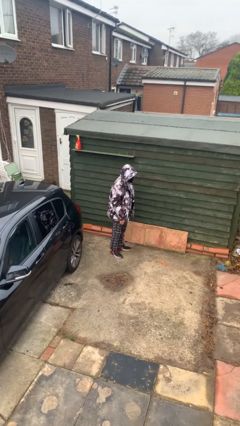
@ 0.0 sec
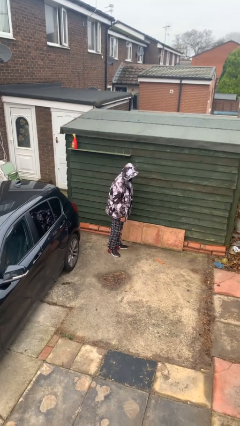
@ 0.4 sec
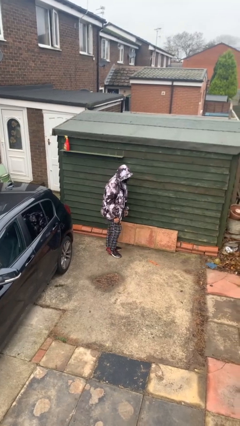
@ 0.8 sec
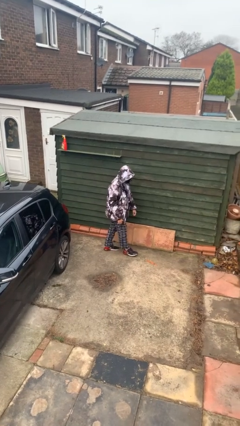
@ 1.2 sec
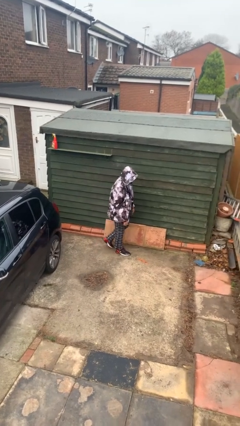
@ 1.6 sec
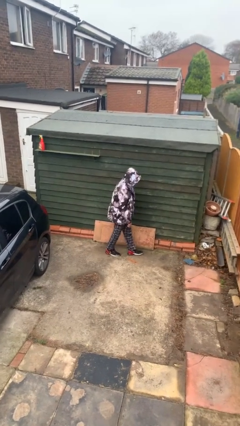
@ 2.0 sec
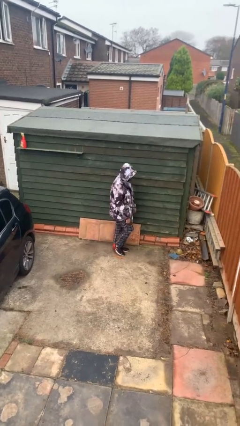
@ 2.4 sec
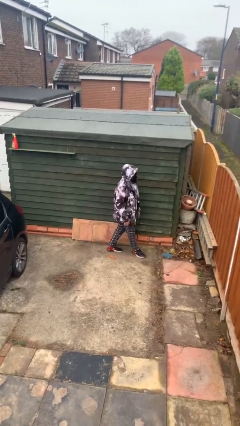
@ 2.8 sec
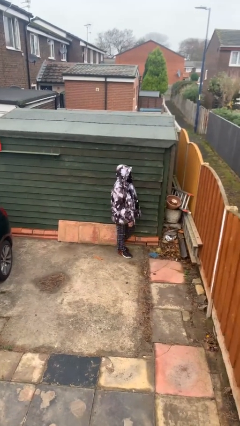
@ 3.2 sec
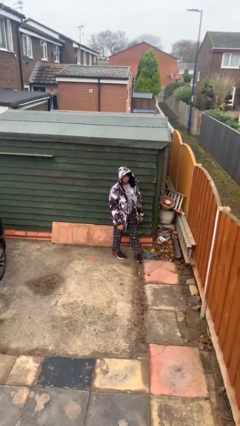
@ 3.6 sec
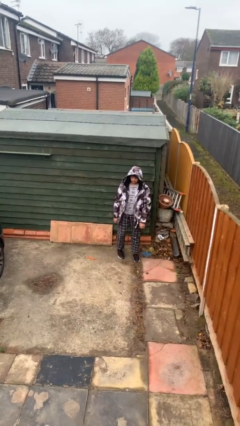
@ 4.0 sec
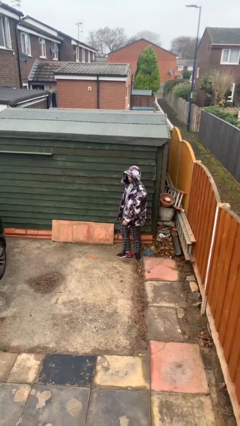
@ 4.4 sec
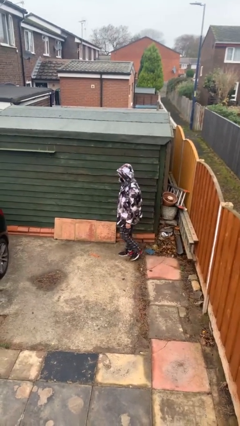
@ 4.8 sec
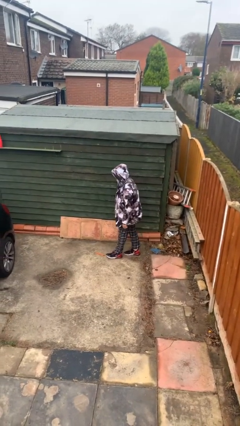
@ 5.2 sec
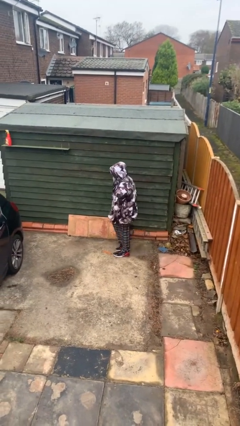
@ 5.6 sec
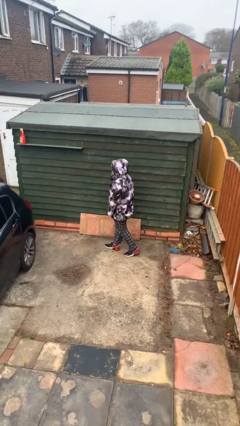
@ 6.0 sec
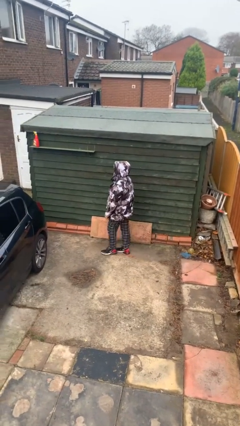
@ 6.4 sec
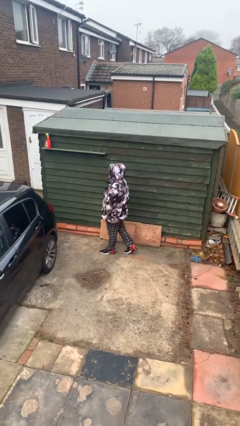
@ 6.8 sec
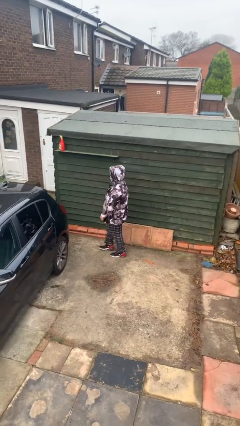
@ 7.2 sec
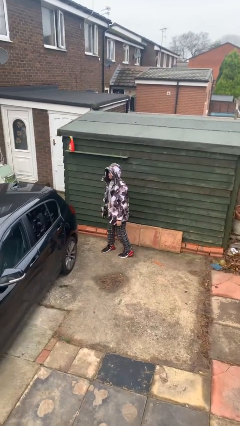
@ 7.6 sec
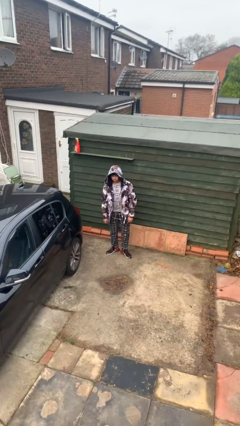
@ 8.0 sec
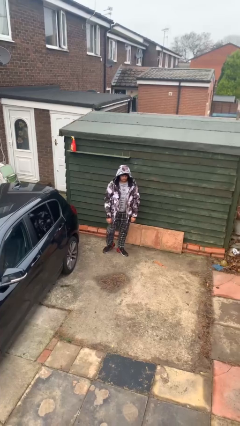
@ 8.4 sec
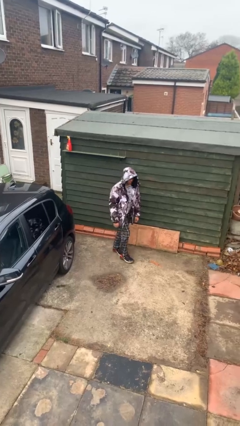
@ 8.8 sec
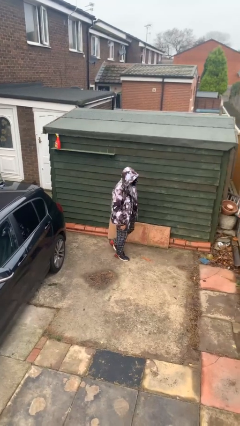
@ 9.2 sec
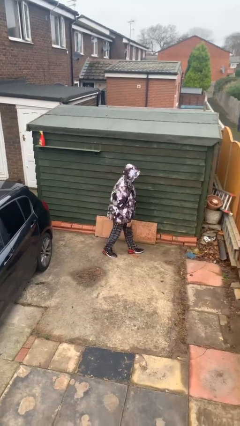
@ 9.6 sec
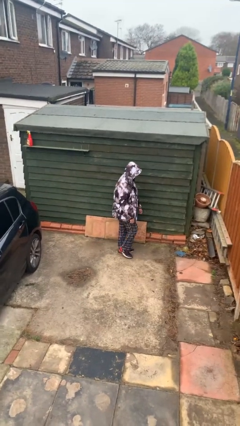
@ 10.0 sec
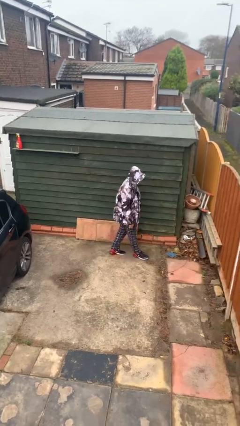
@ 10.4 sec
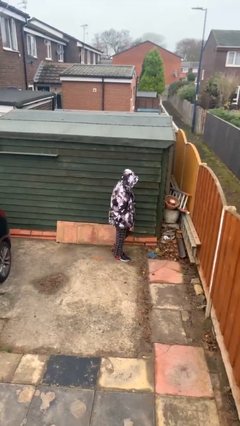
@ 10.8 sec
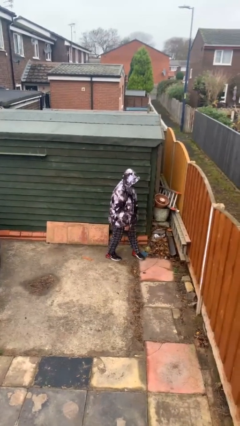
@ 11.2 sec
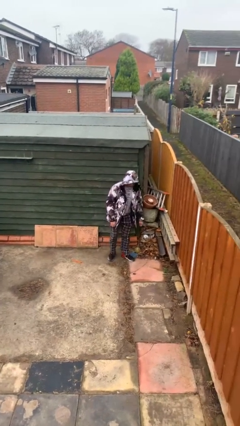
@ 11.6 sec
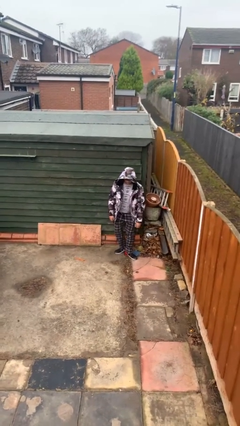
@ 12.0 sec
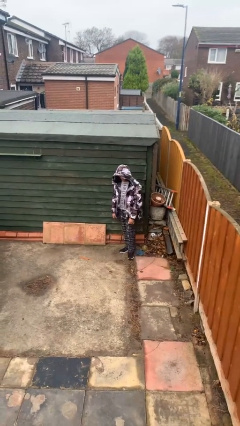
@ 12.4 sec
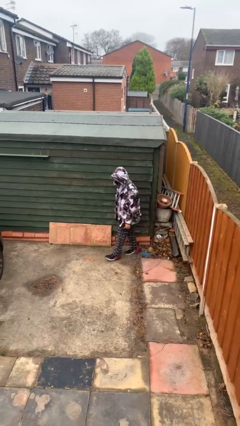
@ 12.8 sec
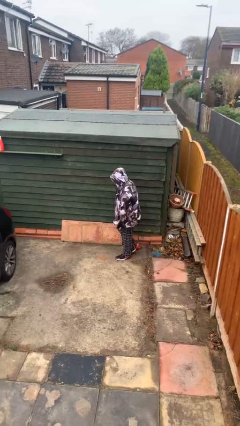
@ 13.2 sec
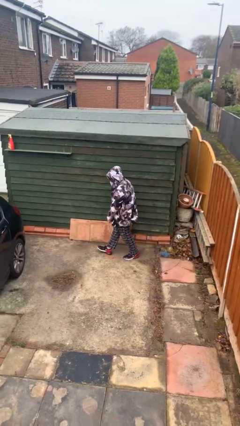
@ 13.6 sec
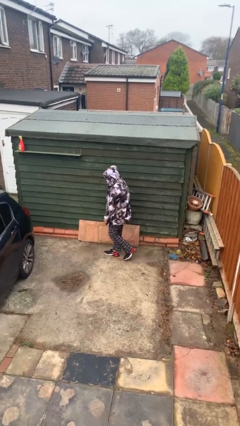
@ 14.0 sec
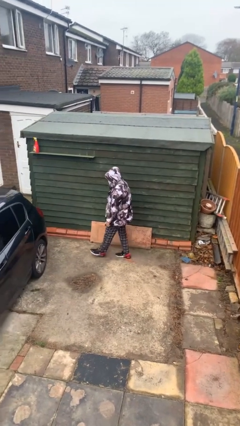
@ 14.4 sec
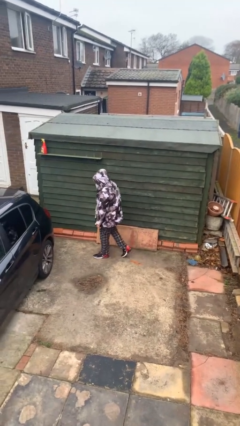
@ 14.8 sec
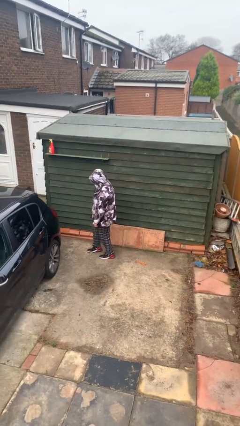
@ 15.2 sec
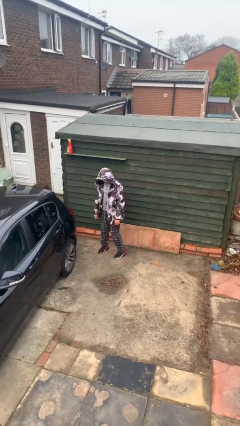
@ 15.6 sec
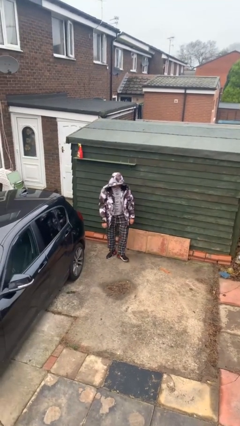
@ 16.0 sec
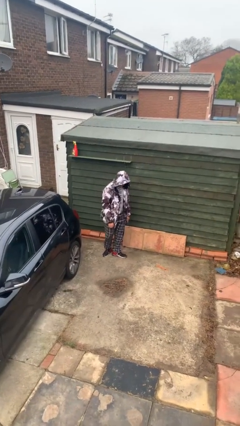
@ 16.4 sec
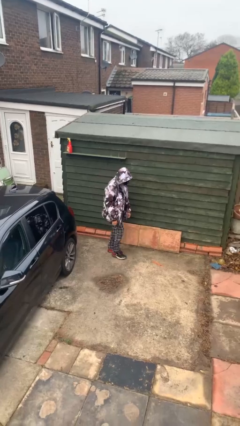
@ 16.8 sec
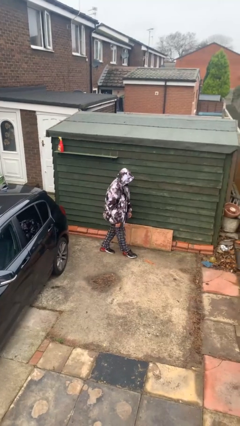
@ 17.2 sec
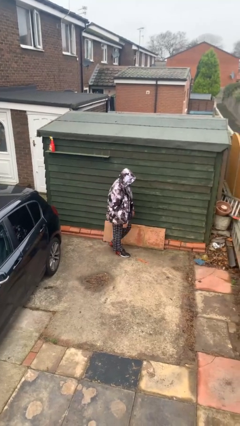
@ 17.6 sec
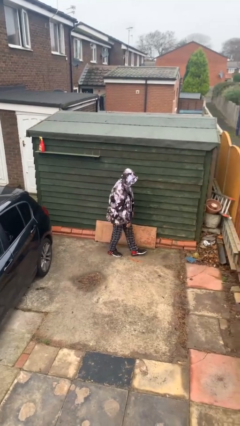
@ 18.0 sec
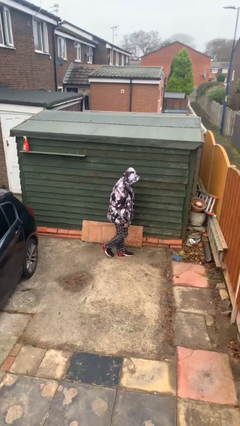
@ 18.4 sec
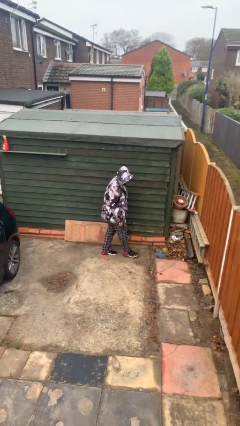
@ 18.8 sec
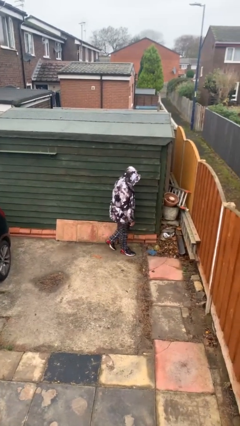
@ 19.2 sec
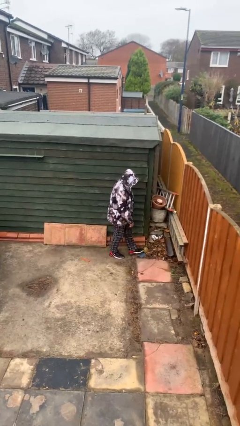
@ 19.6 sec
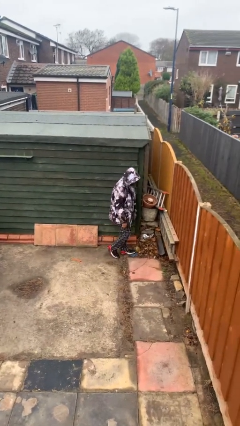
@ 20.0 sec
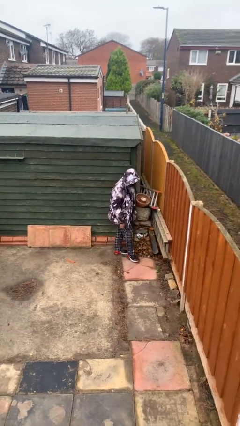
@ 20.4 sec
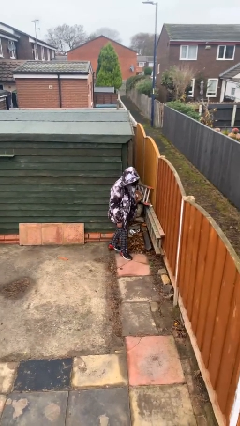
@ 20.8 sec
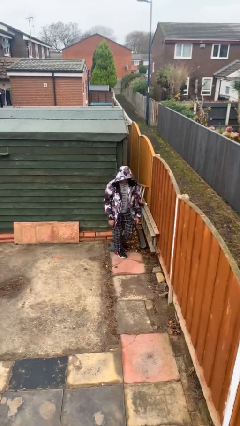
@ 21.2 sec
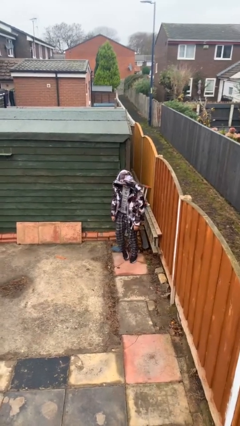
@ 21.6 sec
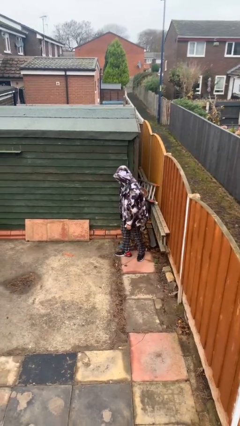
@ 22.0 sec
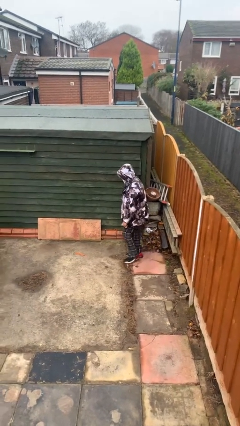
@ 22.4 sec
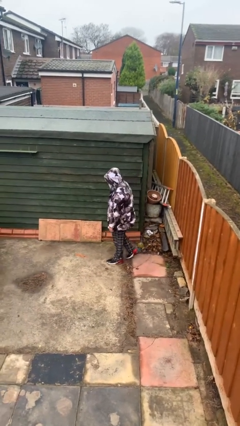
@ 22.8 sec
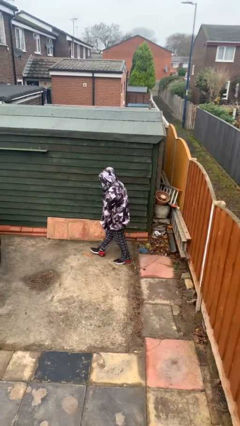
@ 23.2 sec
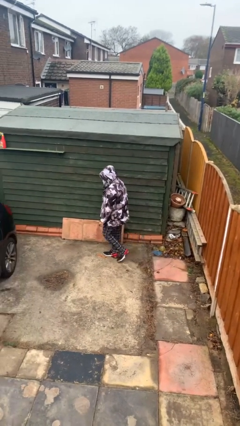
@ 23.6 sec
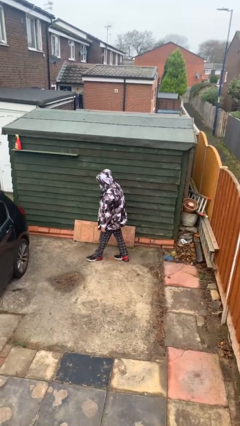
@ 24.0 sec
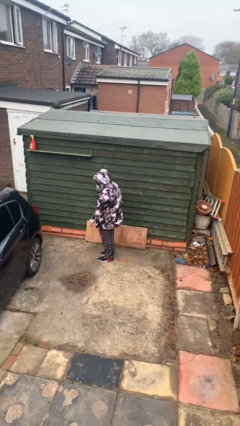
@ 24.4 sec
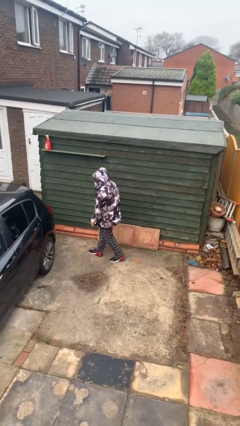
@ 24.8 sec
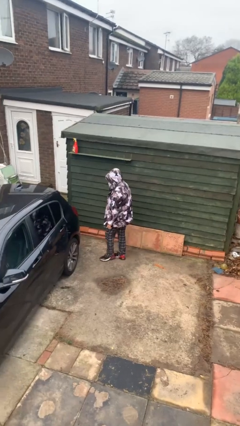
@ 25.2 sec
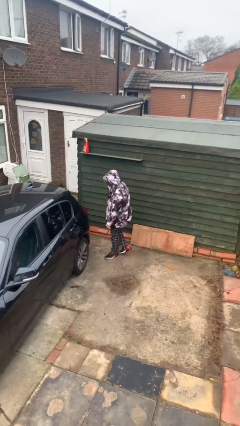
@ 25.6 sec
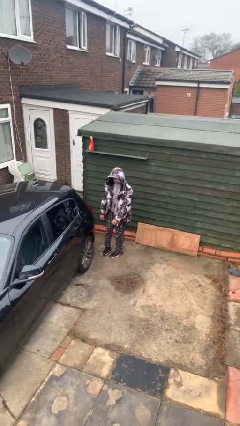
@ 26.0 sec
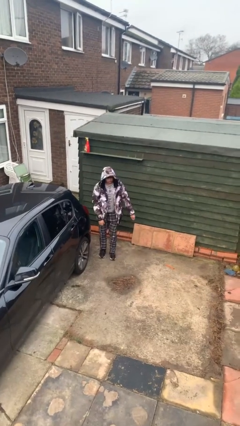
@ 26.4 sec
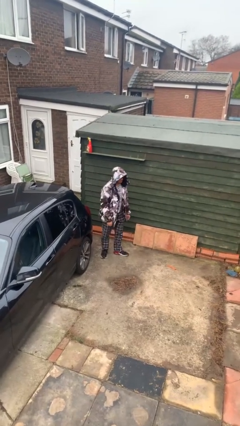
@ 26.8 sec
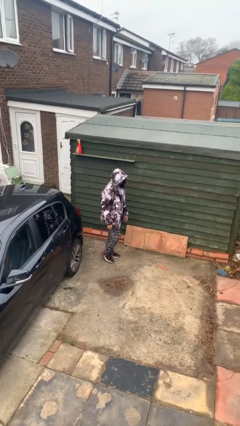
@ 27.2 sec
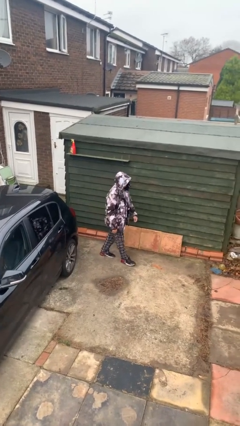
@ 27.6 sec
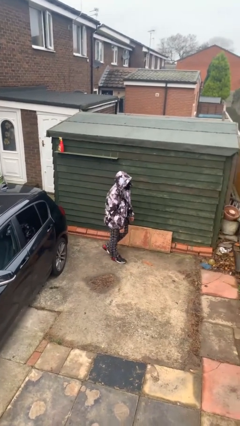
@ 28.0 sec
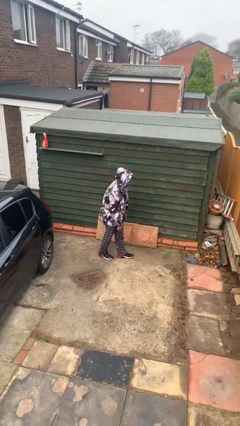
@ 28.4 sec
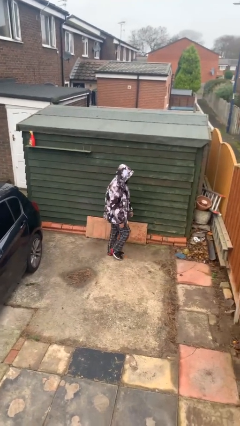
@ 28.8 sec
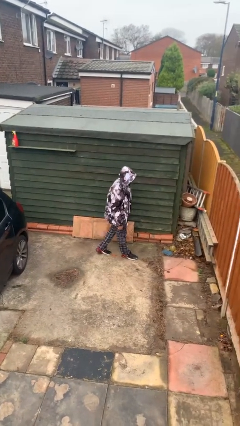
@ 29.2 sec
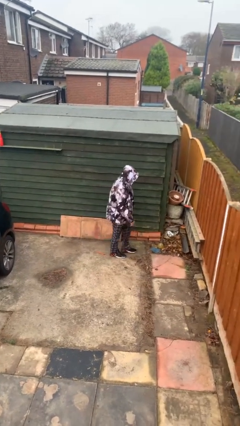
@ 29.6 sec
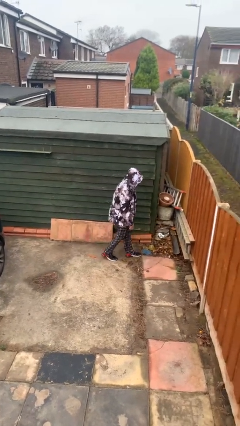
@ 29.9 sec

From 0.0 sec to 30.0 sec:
person walks

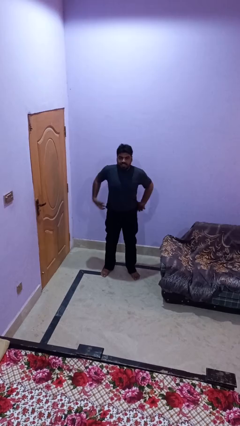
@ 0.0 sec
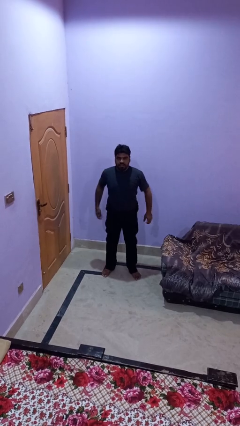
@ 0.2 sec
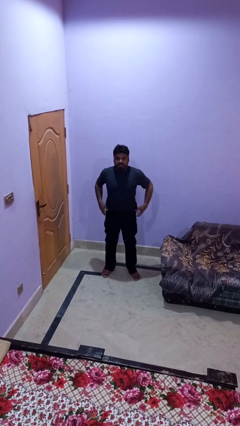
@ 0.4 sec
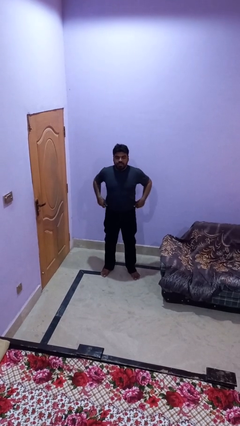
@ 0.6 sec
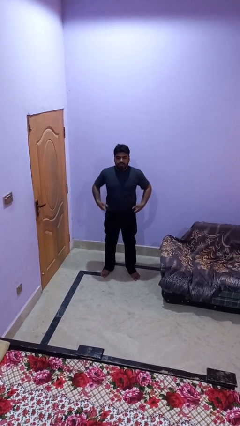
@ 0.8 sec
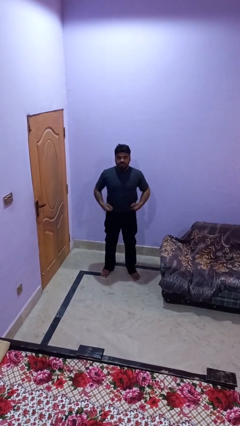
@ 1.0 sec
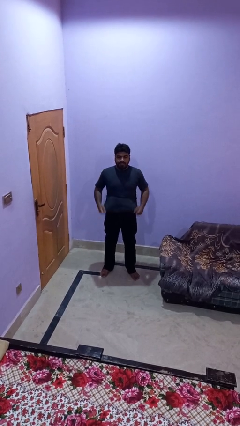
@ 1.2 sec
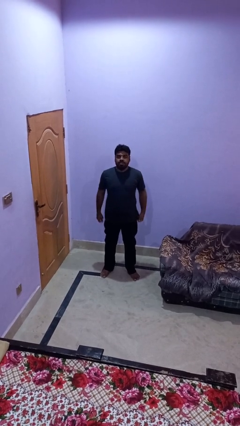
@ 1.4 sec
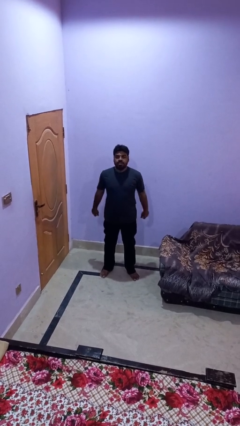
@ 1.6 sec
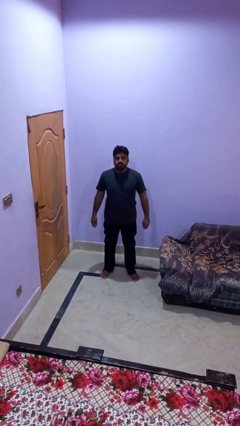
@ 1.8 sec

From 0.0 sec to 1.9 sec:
person untucks shirt

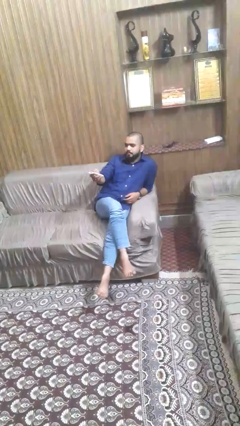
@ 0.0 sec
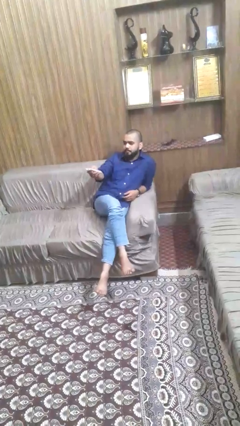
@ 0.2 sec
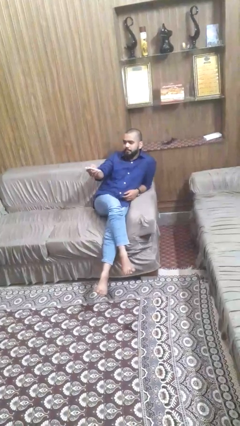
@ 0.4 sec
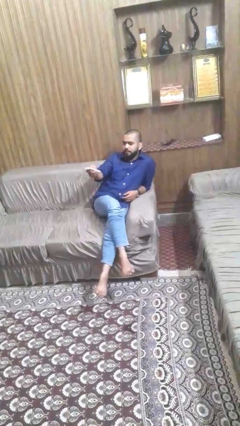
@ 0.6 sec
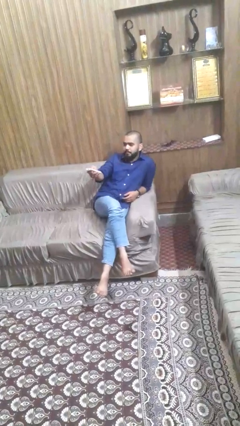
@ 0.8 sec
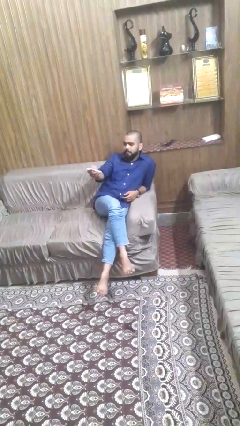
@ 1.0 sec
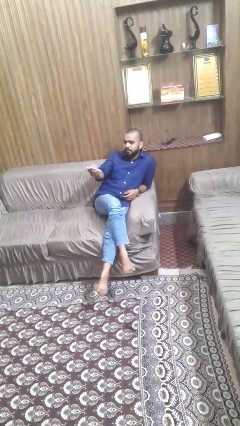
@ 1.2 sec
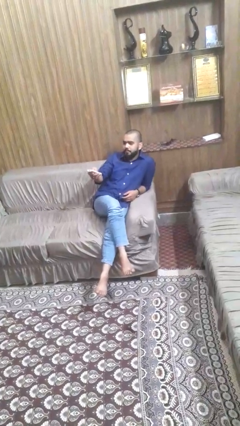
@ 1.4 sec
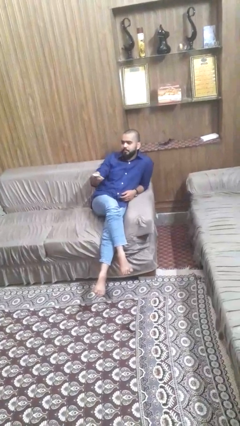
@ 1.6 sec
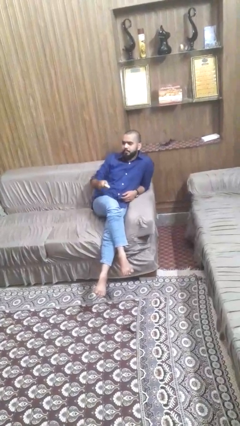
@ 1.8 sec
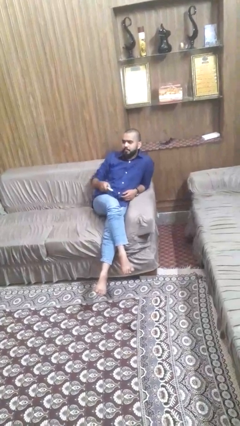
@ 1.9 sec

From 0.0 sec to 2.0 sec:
person uses television remote
